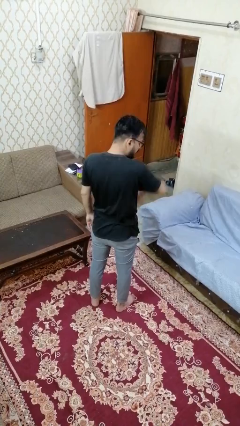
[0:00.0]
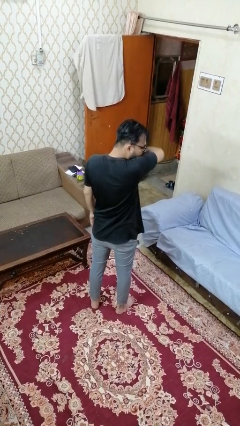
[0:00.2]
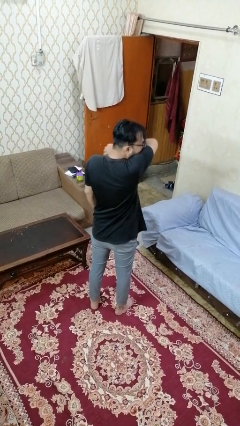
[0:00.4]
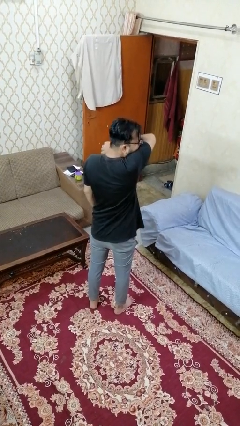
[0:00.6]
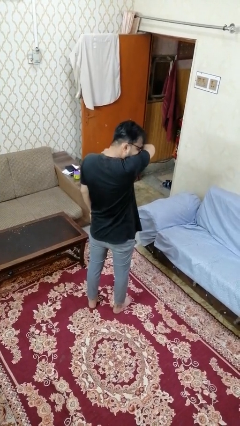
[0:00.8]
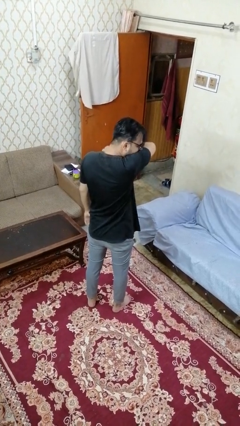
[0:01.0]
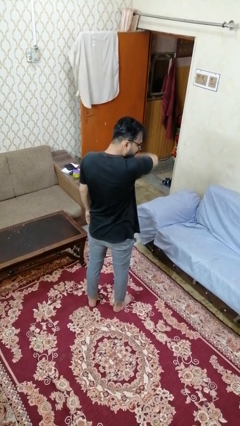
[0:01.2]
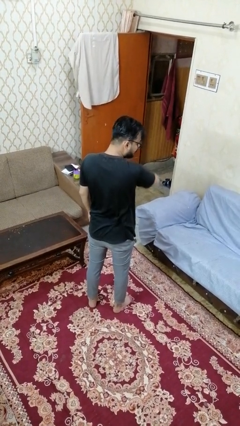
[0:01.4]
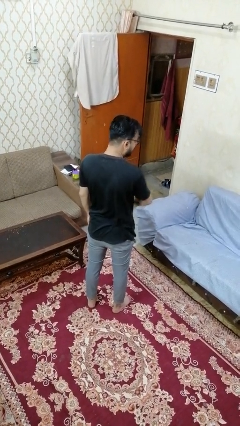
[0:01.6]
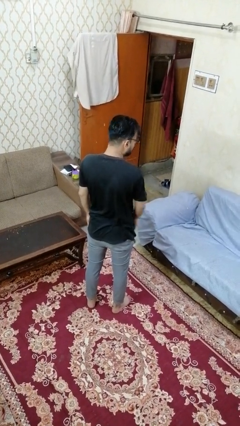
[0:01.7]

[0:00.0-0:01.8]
person sneezes into arm

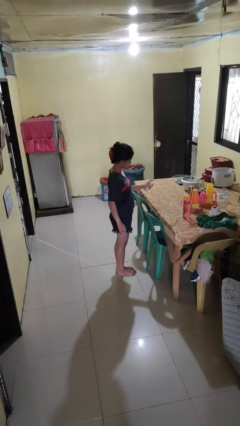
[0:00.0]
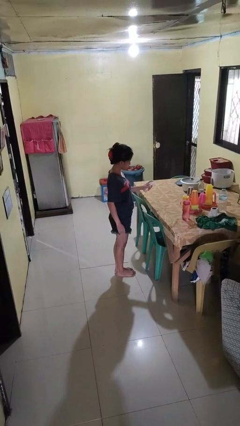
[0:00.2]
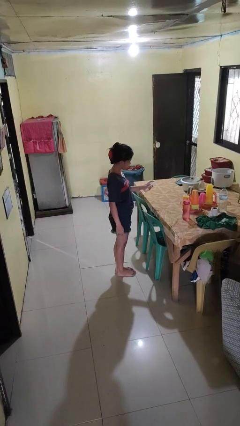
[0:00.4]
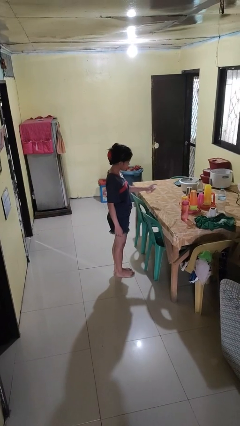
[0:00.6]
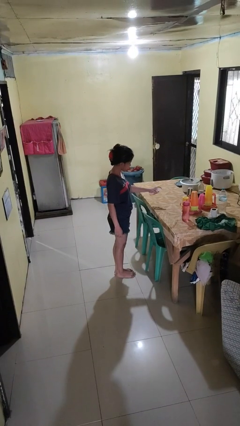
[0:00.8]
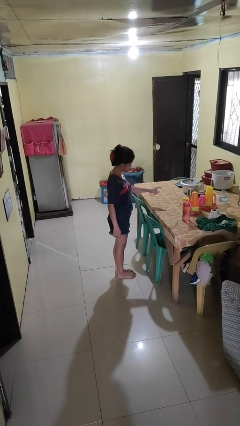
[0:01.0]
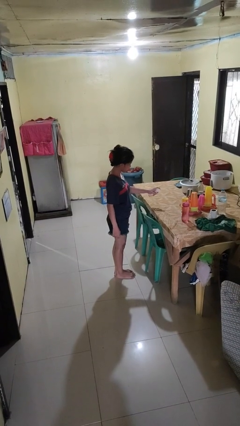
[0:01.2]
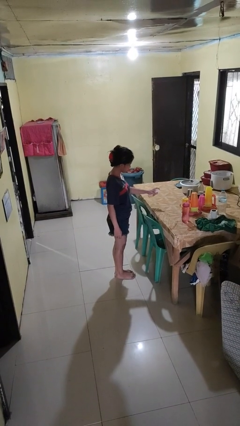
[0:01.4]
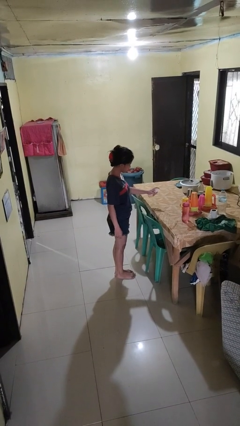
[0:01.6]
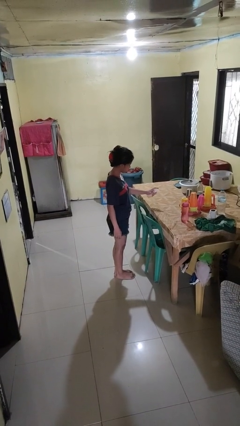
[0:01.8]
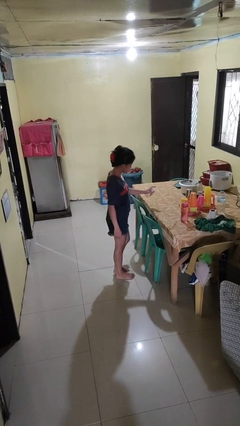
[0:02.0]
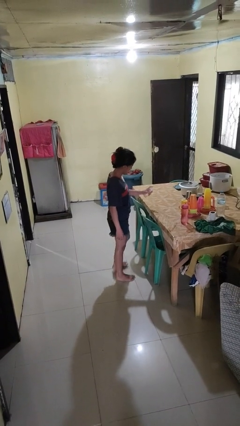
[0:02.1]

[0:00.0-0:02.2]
person sprays from bottle

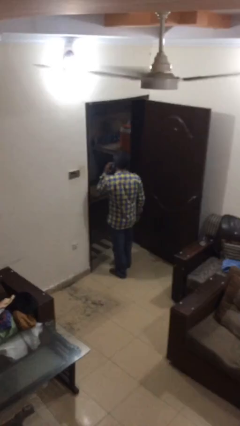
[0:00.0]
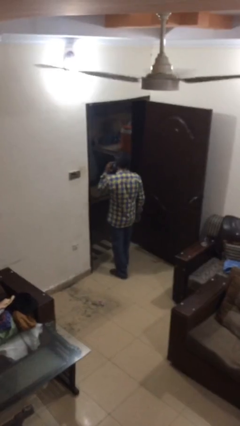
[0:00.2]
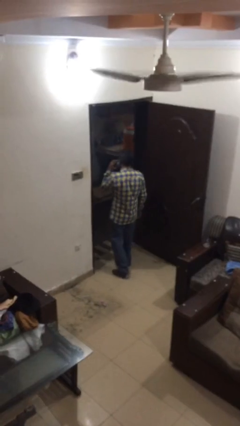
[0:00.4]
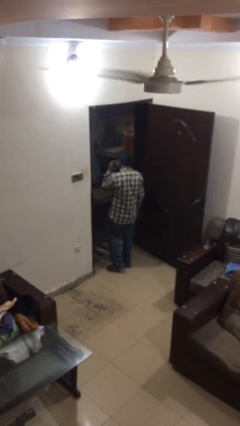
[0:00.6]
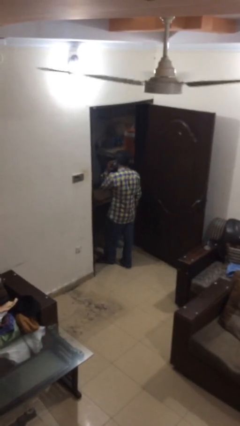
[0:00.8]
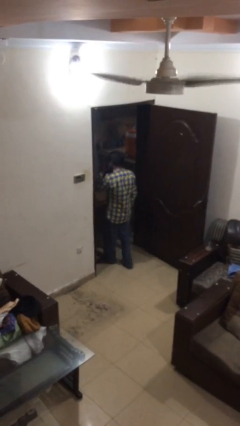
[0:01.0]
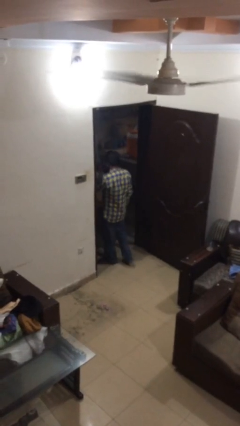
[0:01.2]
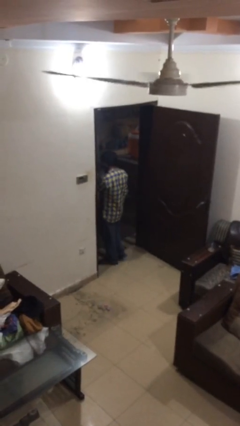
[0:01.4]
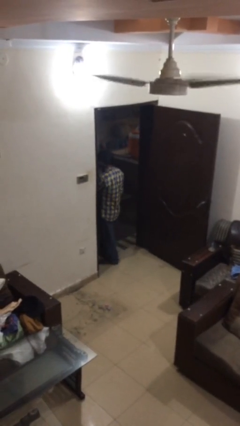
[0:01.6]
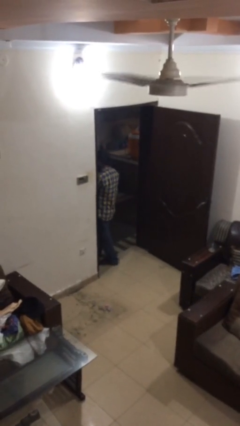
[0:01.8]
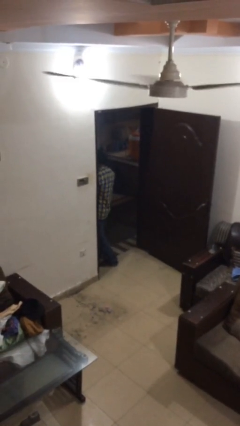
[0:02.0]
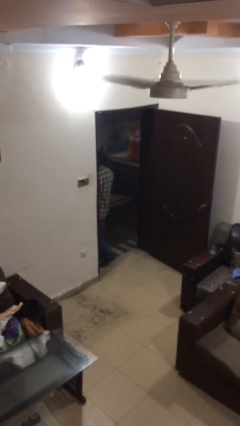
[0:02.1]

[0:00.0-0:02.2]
person exits scene through structure

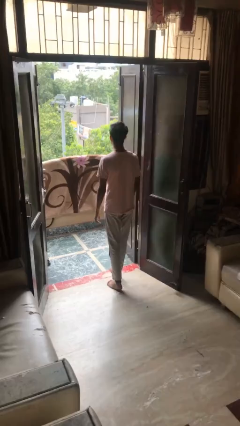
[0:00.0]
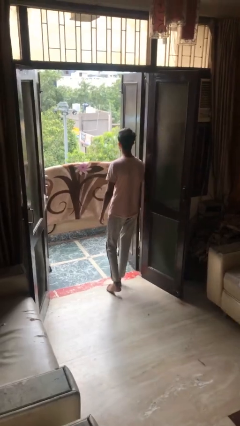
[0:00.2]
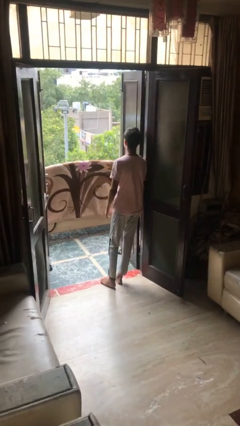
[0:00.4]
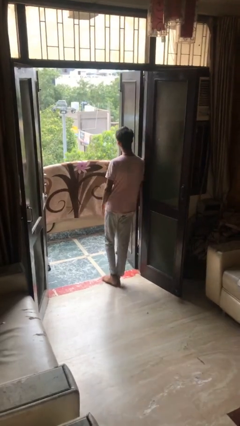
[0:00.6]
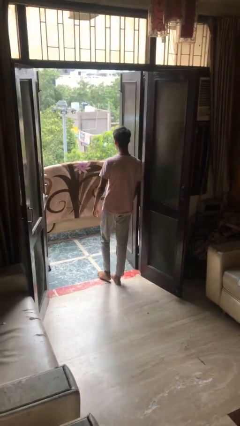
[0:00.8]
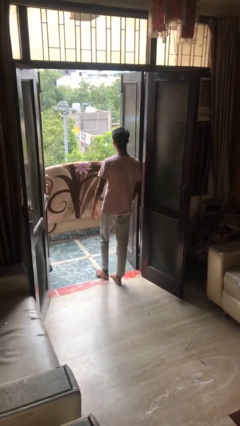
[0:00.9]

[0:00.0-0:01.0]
person bumps into wall

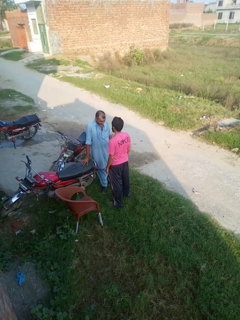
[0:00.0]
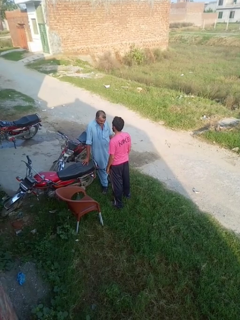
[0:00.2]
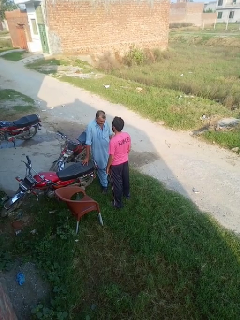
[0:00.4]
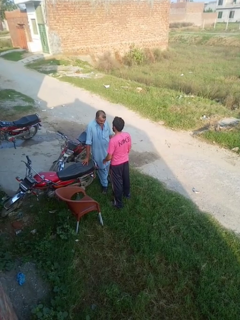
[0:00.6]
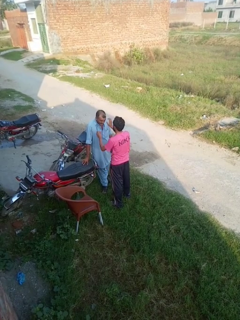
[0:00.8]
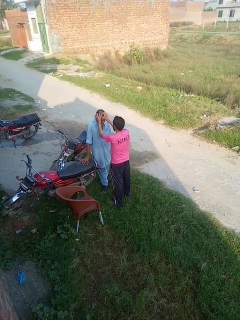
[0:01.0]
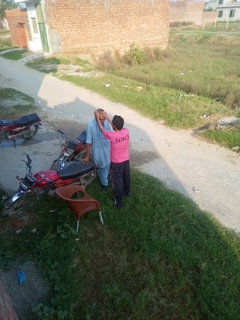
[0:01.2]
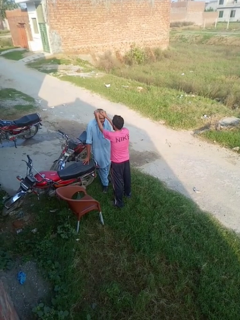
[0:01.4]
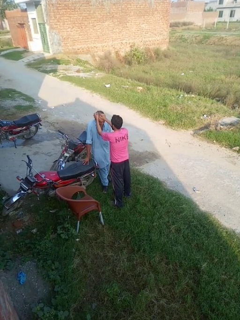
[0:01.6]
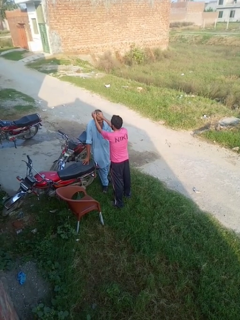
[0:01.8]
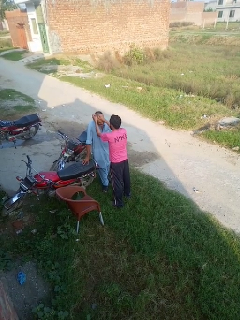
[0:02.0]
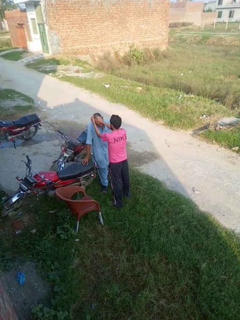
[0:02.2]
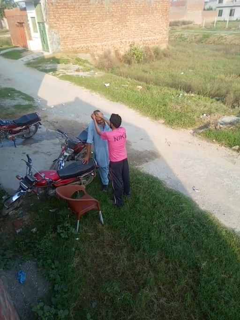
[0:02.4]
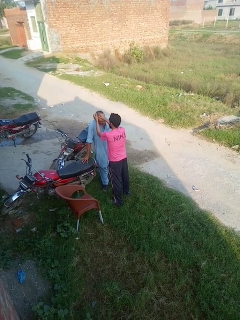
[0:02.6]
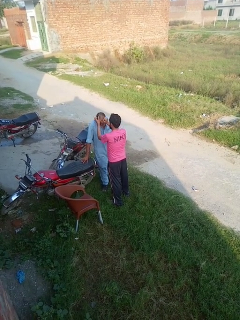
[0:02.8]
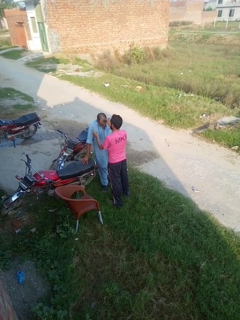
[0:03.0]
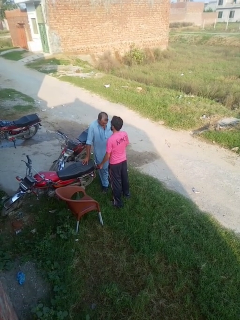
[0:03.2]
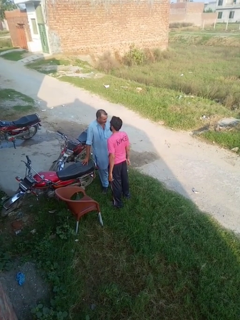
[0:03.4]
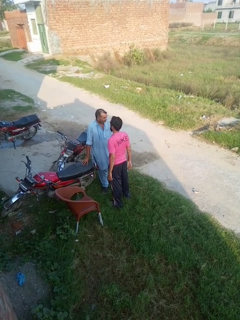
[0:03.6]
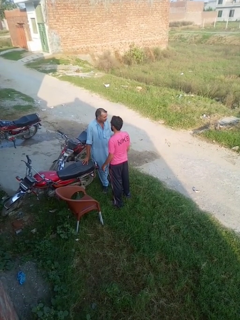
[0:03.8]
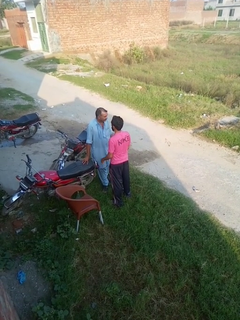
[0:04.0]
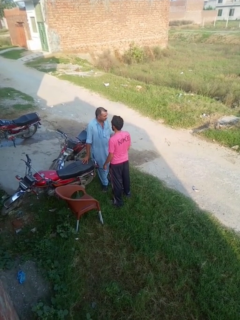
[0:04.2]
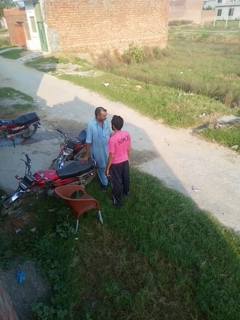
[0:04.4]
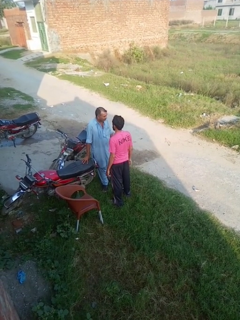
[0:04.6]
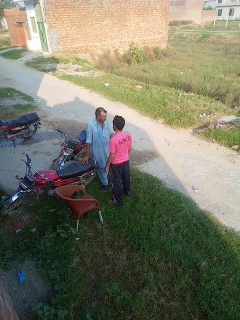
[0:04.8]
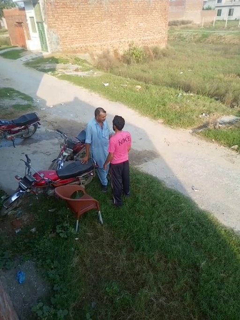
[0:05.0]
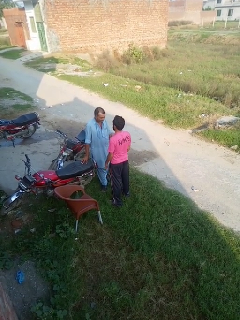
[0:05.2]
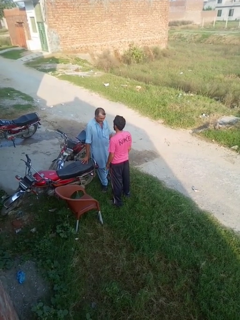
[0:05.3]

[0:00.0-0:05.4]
person grabs person by hair

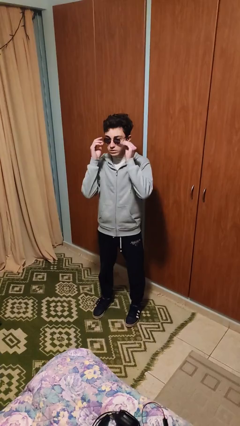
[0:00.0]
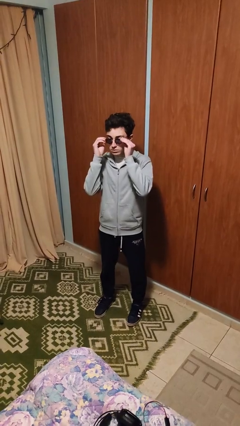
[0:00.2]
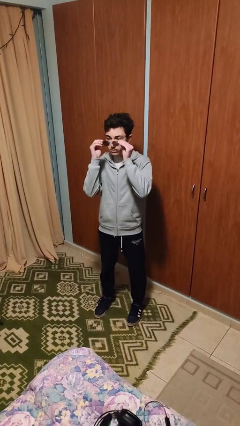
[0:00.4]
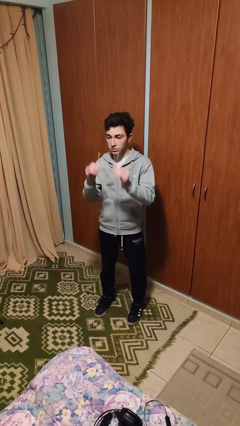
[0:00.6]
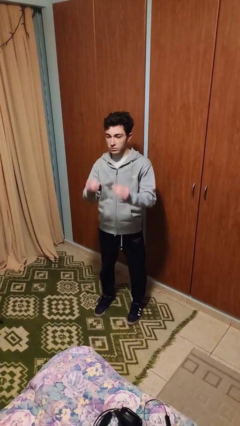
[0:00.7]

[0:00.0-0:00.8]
person takes off glasses

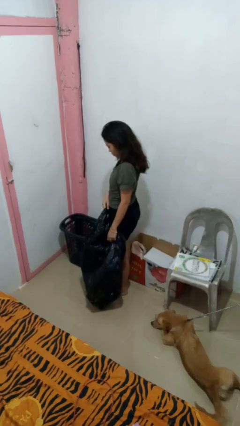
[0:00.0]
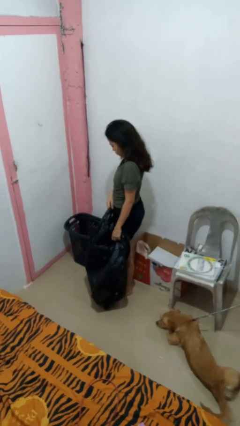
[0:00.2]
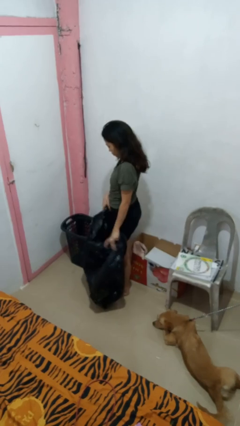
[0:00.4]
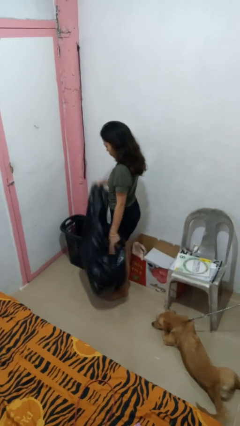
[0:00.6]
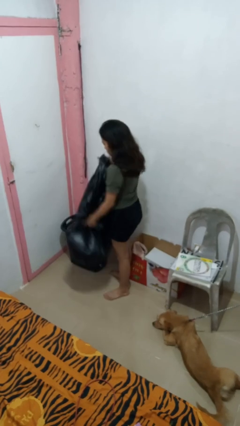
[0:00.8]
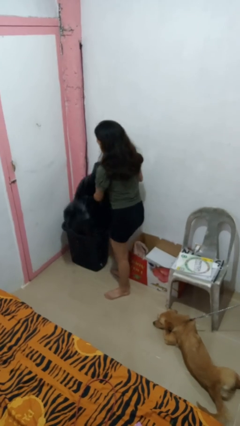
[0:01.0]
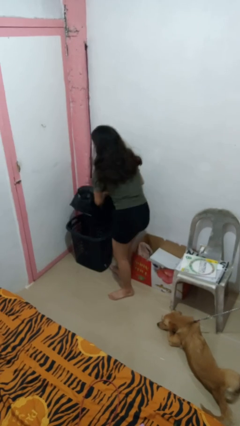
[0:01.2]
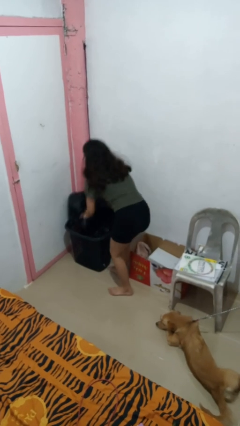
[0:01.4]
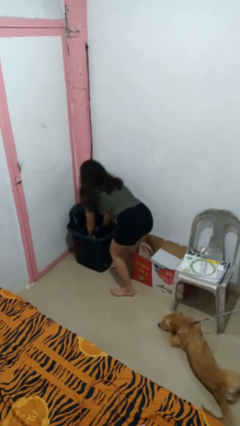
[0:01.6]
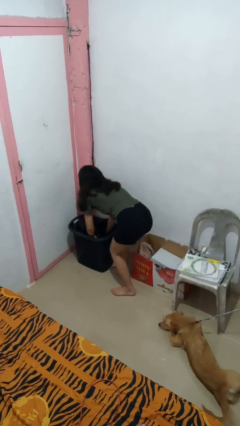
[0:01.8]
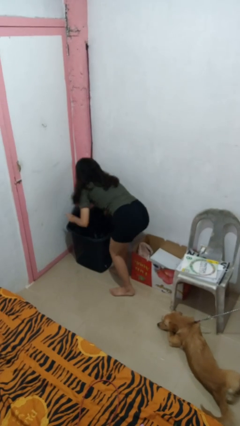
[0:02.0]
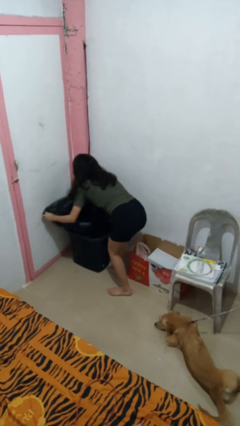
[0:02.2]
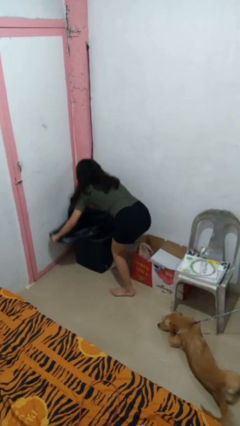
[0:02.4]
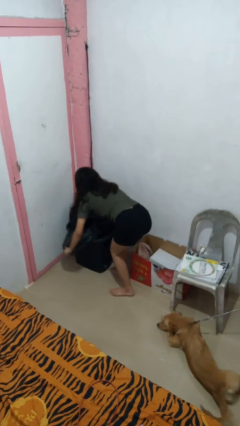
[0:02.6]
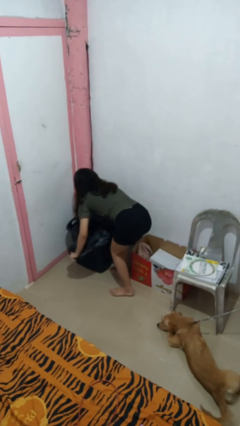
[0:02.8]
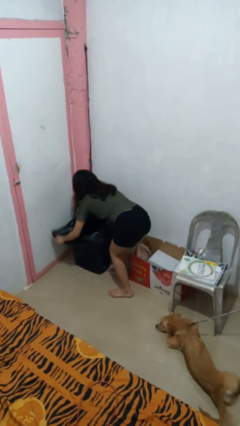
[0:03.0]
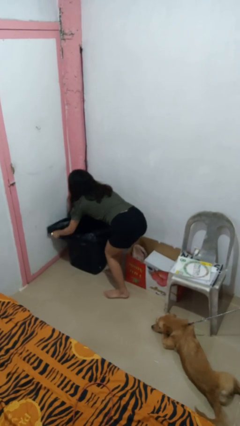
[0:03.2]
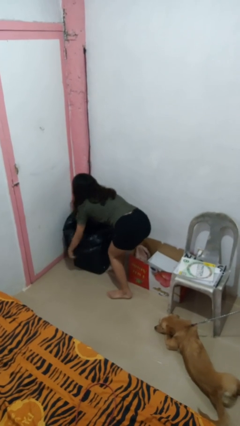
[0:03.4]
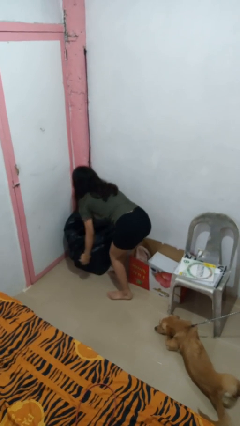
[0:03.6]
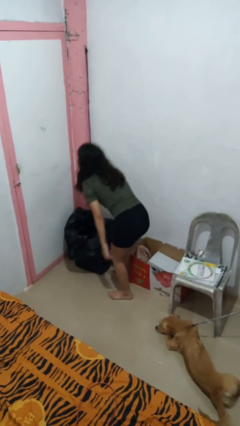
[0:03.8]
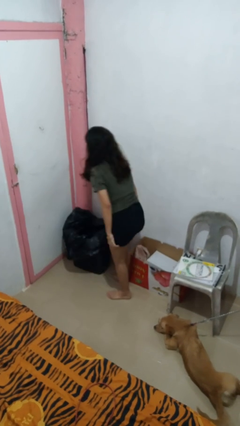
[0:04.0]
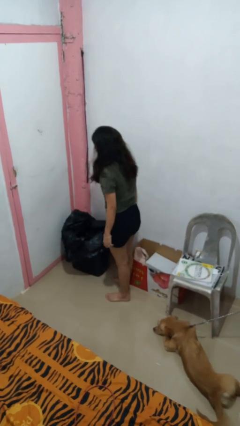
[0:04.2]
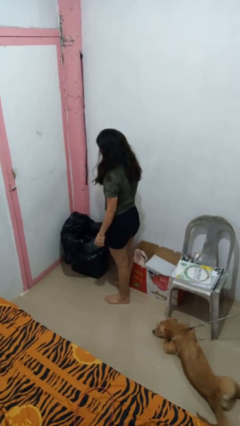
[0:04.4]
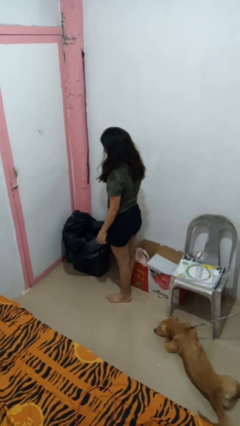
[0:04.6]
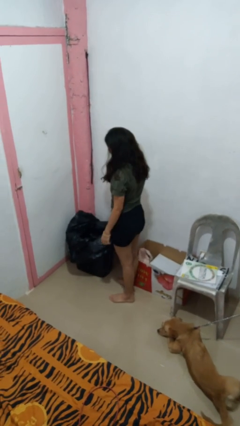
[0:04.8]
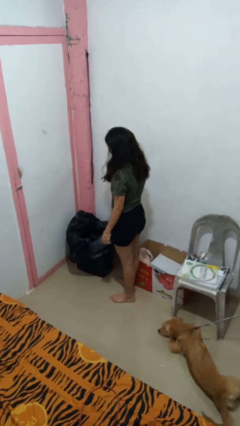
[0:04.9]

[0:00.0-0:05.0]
person inserts trashbag into trashcan
